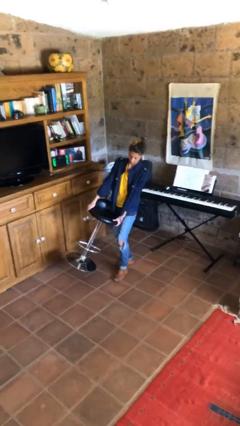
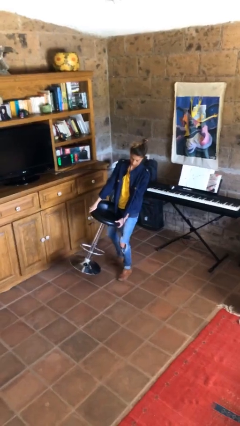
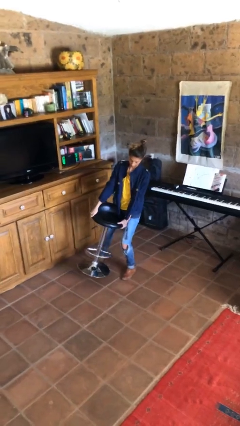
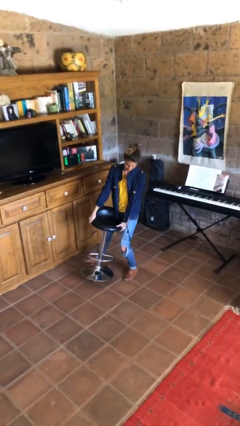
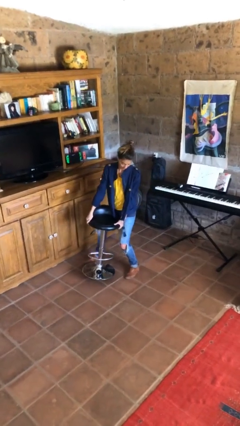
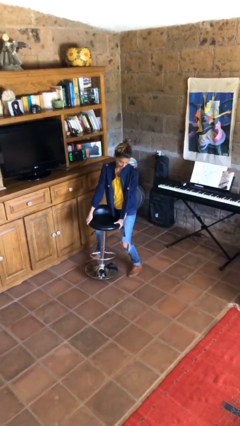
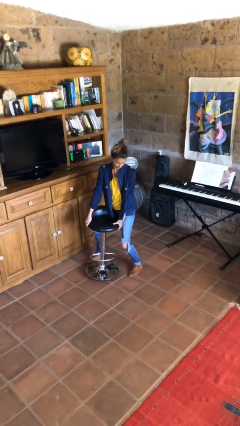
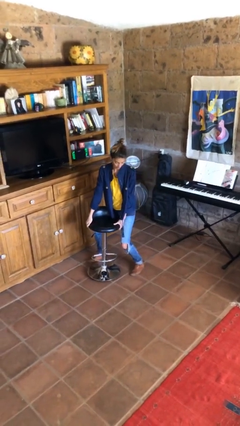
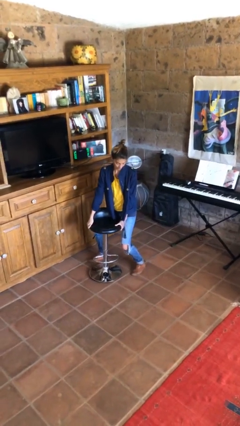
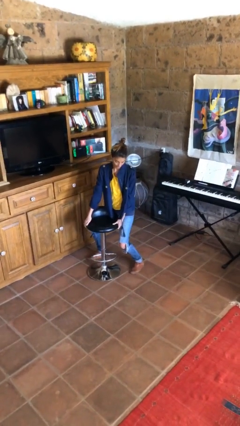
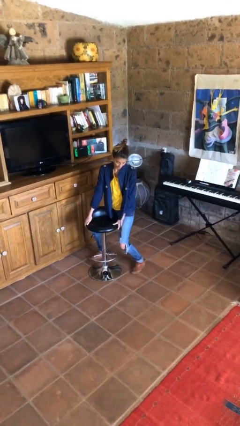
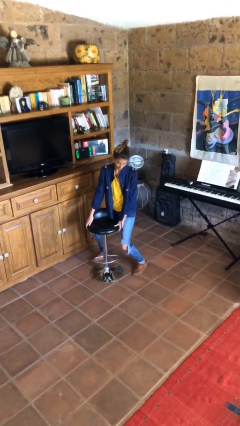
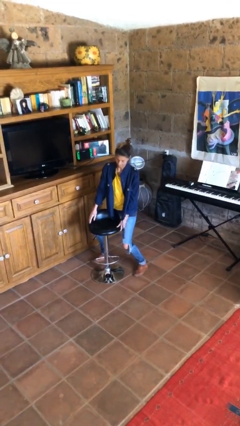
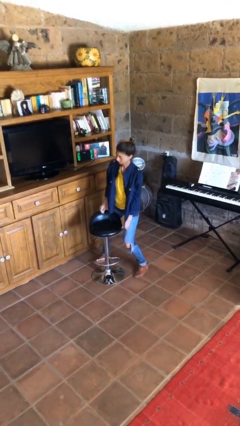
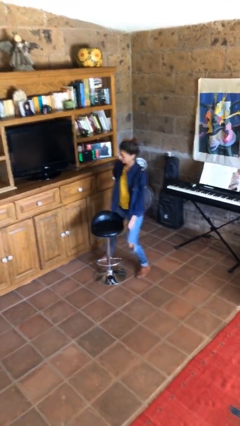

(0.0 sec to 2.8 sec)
person puts down object on floor

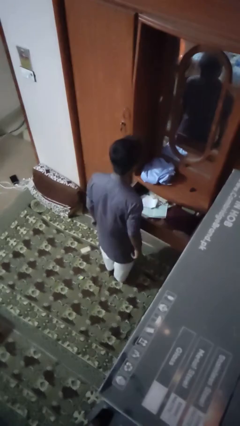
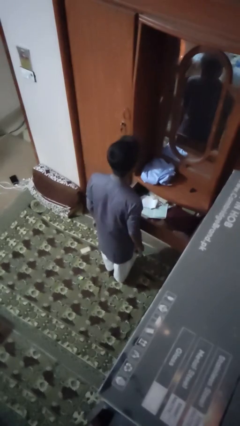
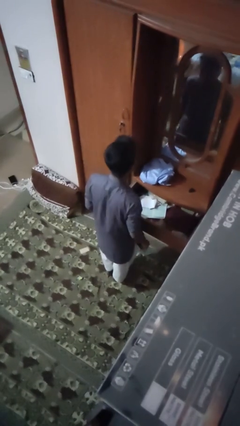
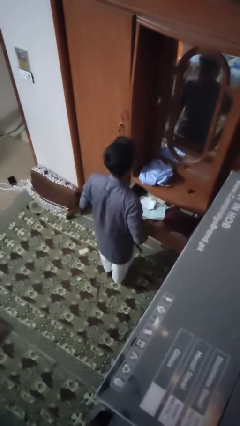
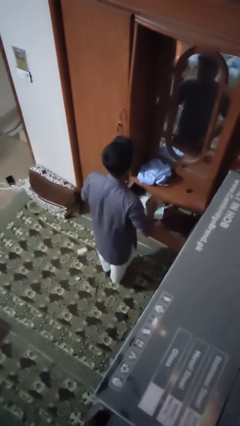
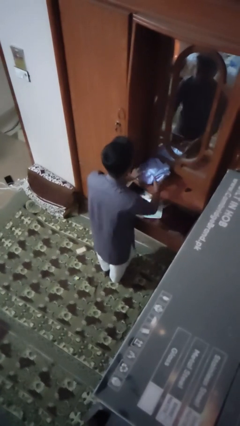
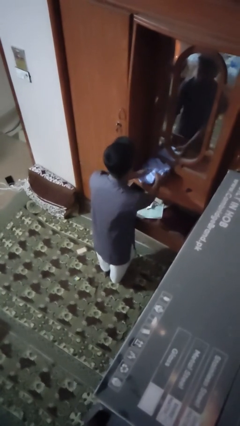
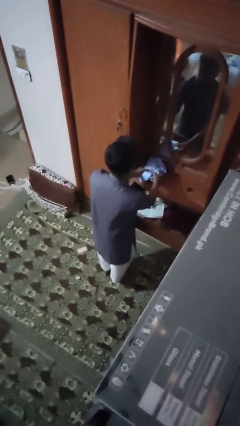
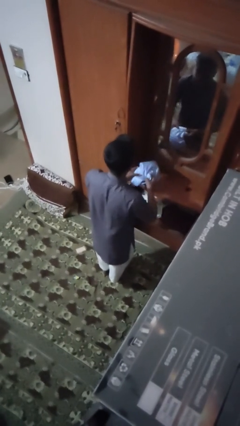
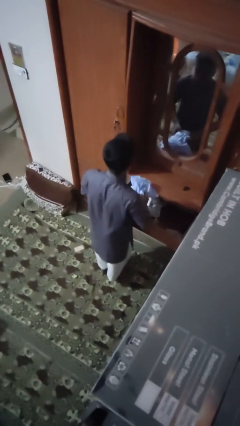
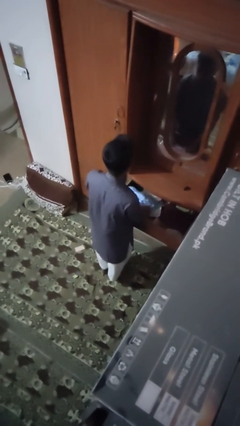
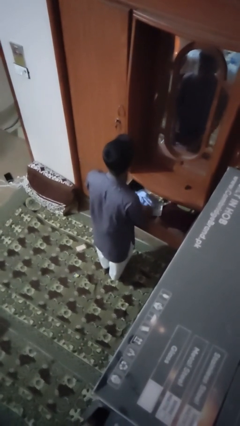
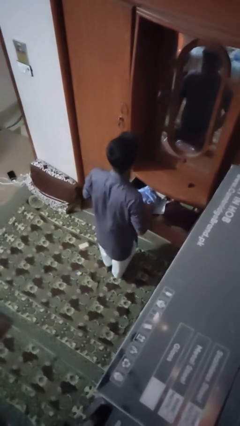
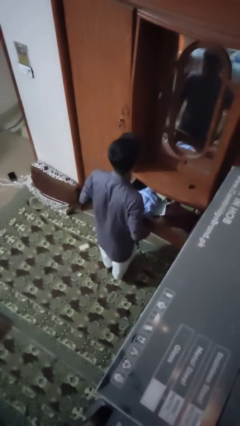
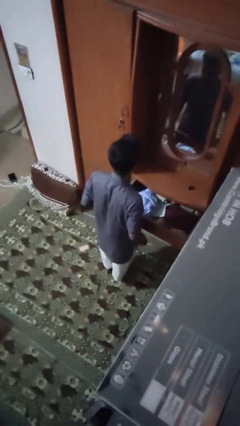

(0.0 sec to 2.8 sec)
person puts clothes into dresser

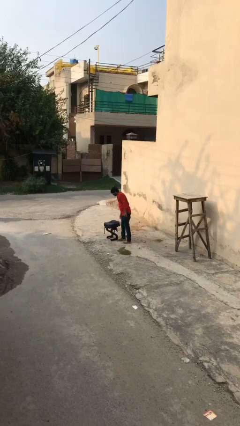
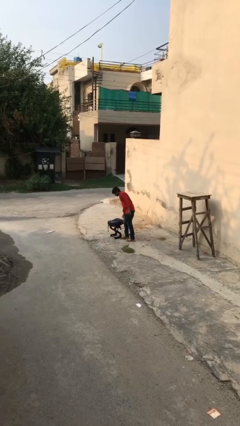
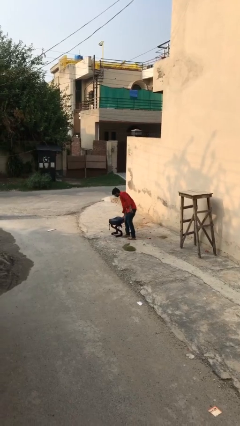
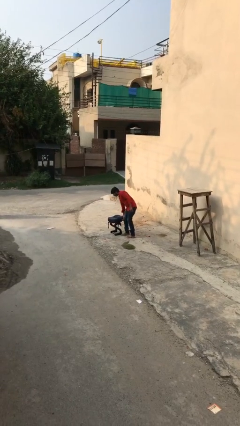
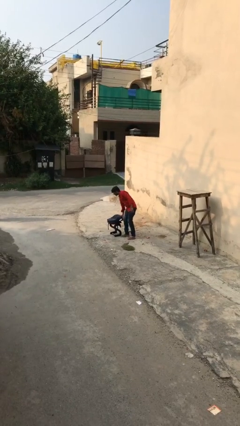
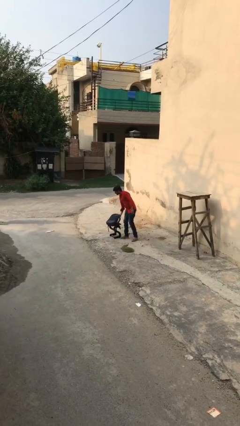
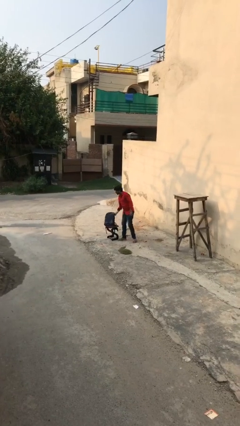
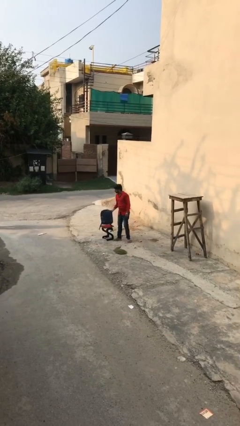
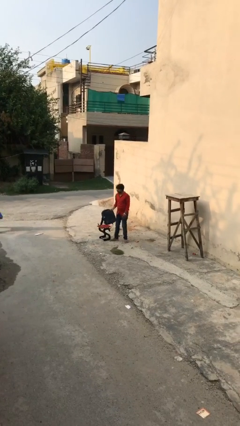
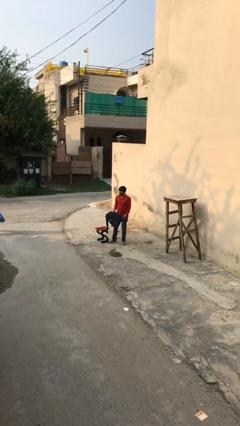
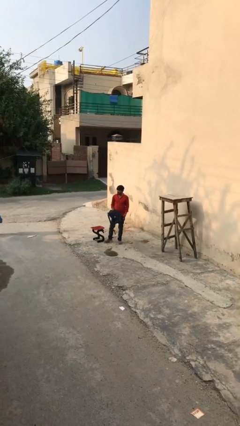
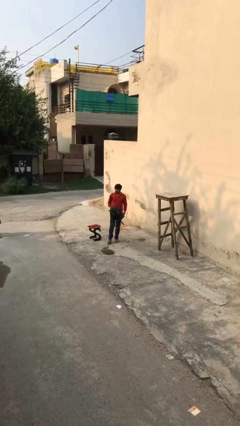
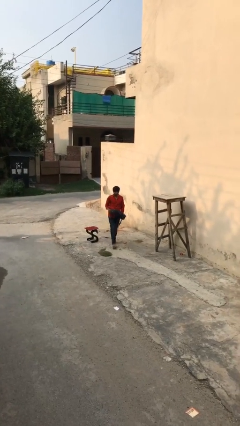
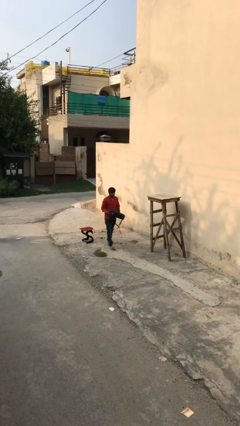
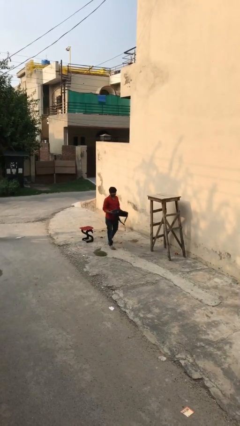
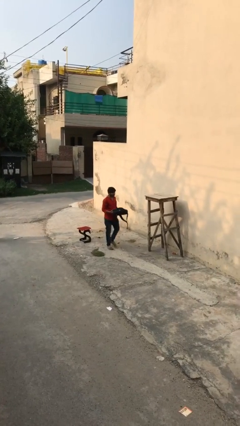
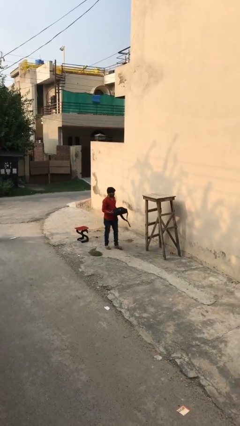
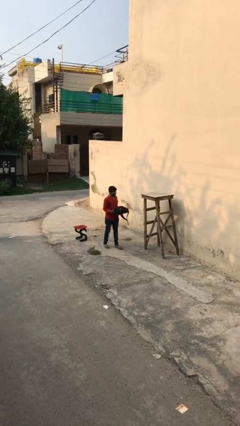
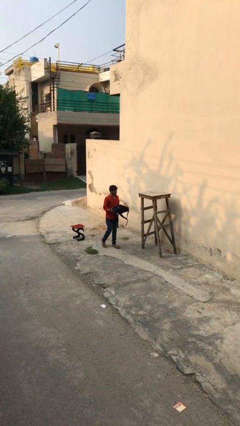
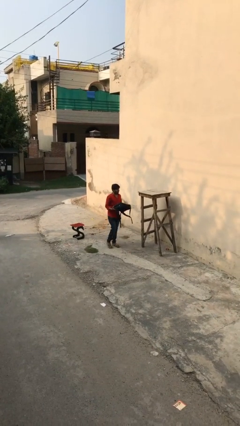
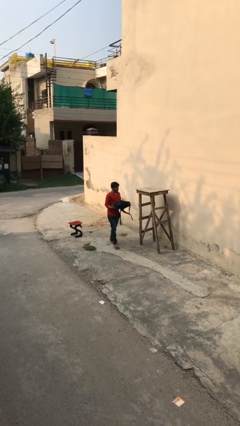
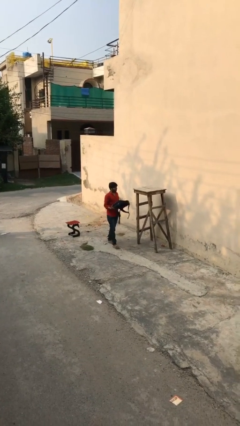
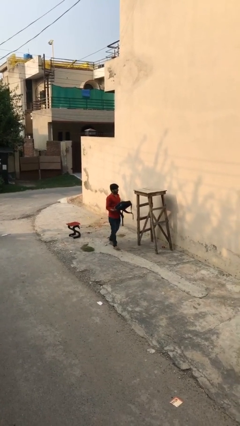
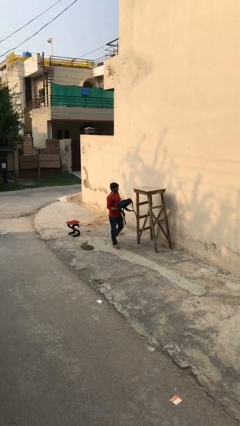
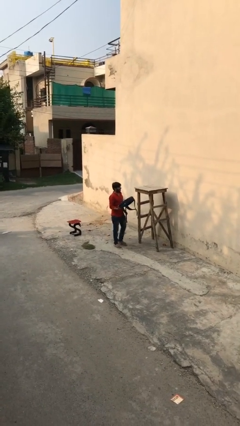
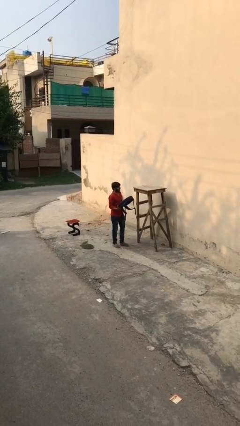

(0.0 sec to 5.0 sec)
person picks up object from table

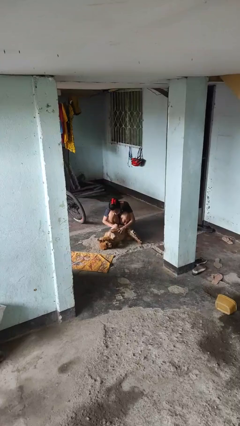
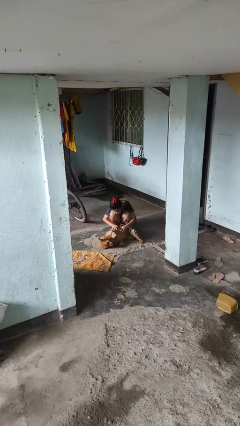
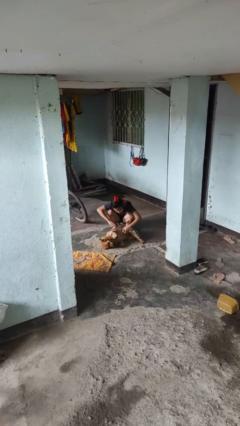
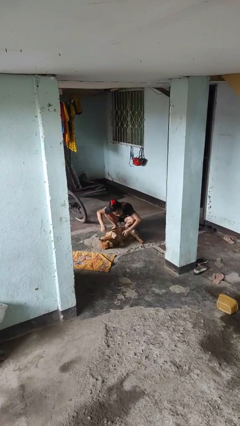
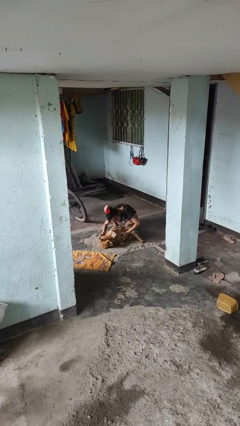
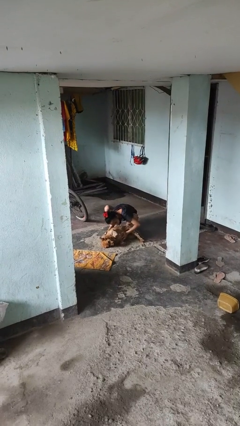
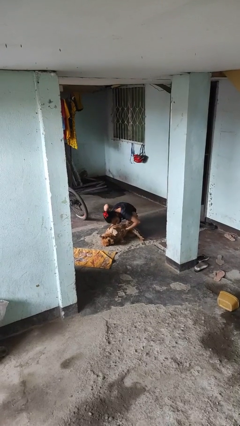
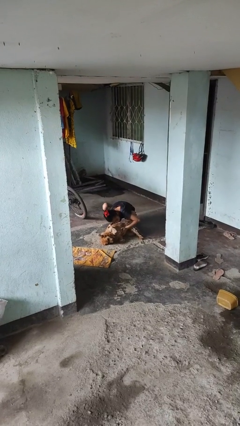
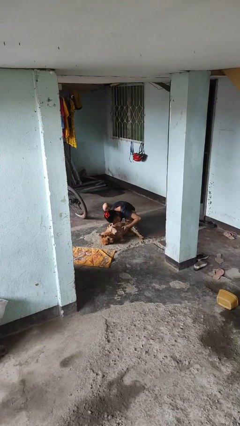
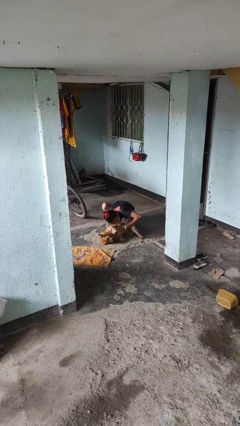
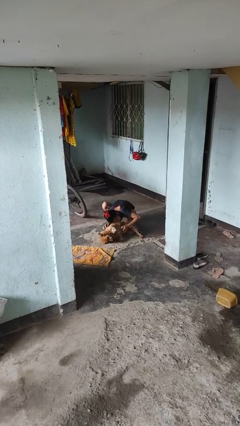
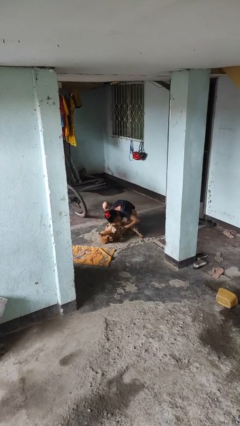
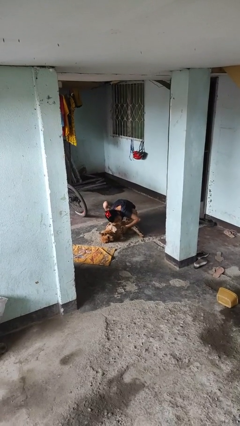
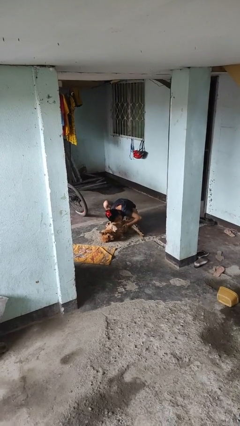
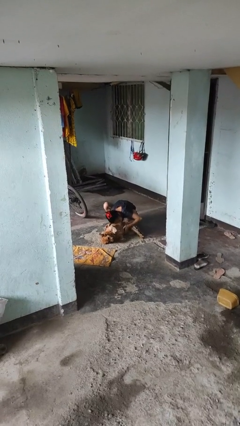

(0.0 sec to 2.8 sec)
person hugs dog

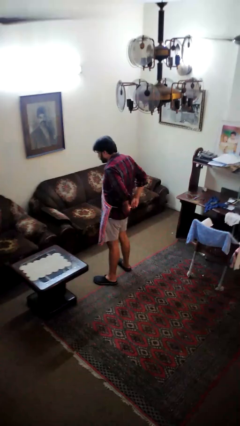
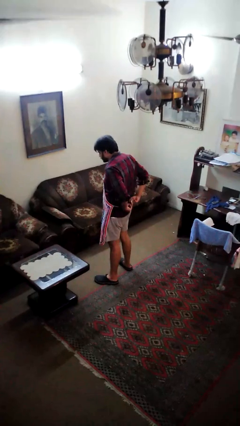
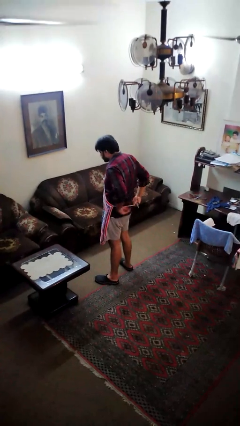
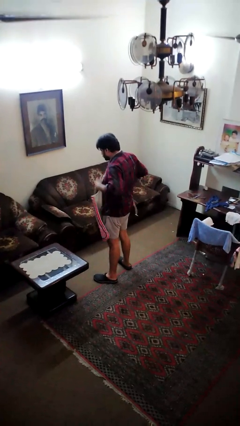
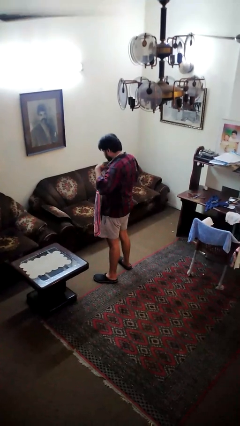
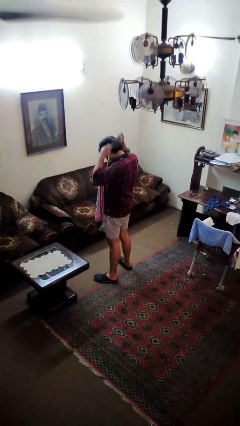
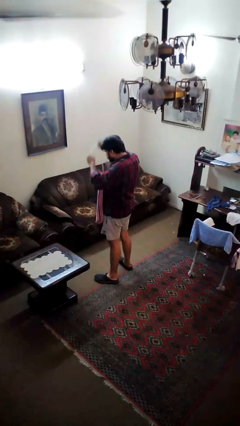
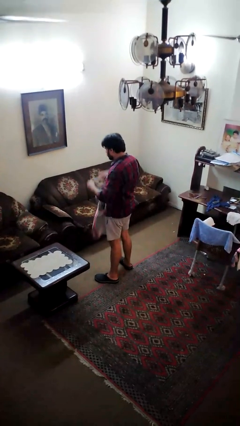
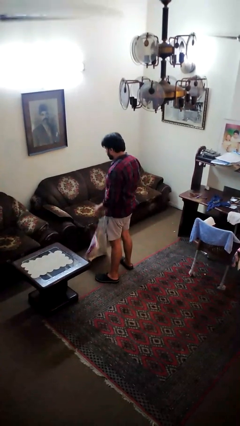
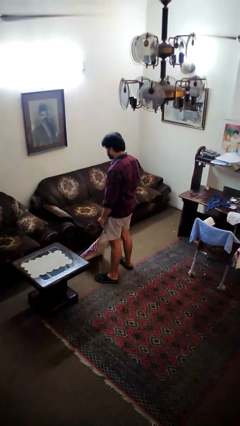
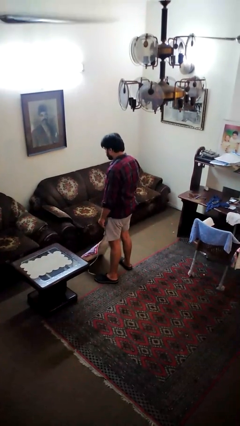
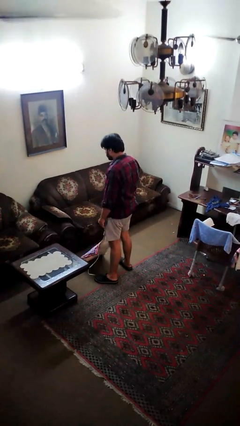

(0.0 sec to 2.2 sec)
person takes off apron

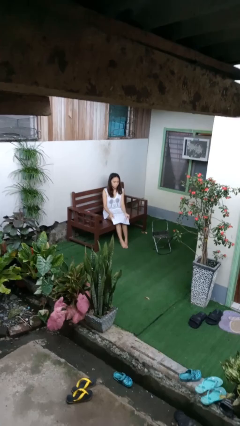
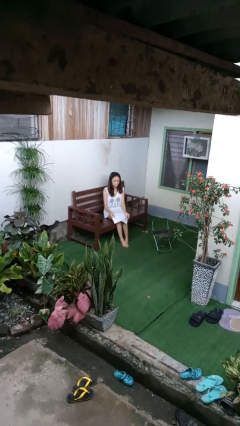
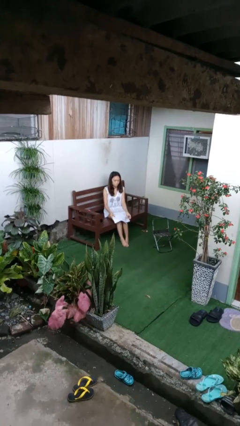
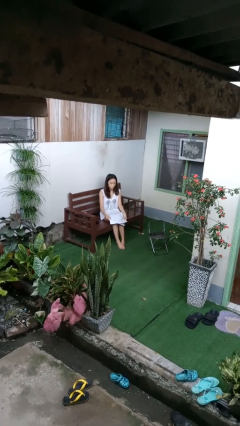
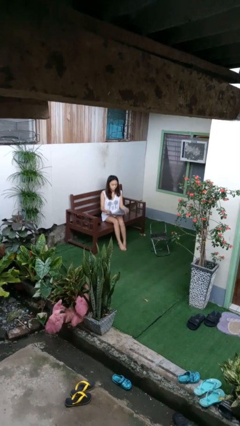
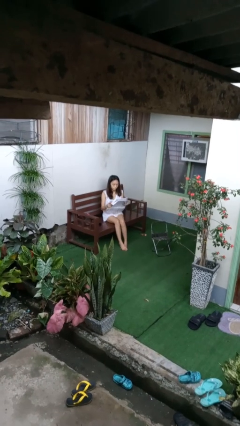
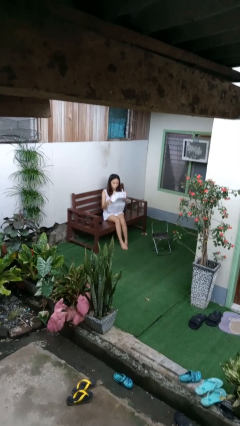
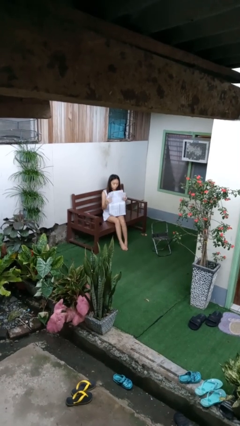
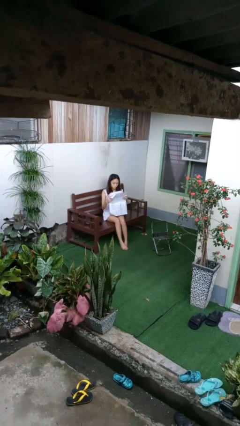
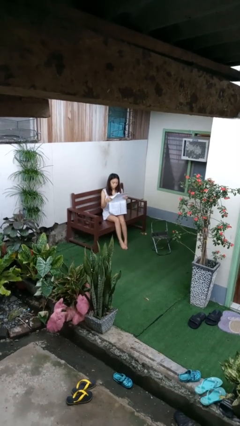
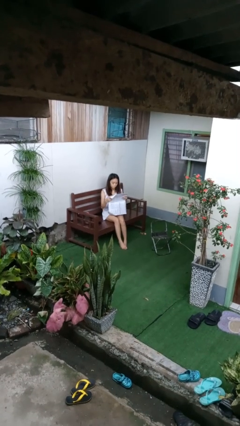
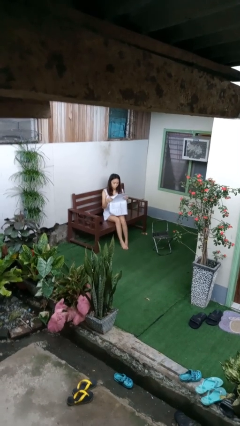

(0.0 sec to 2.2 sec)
person reads newspaper
